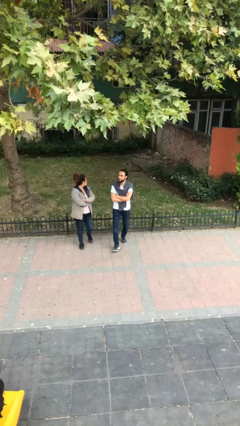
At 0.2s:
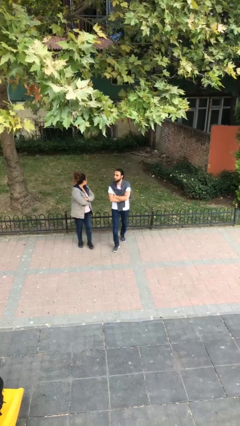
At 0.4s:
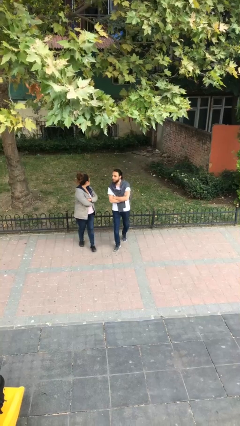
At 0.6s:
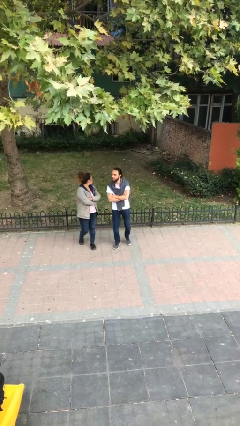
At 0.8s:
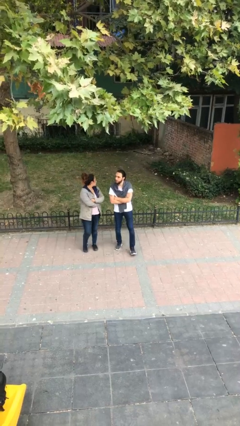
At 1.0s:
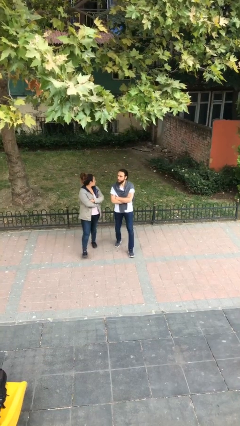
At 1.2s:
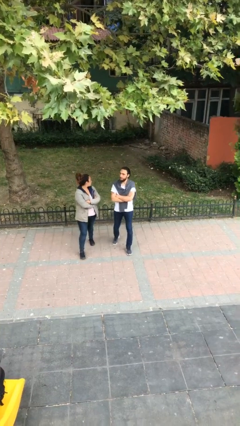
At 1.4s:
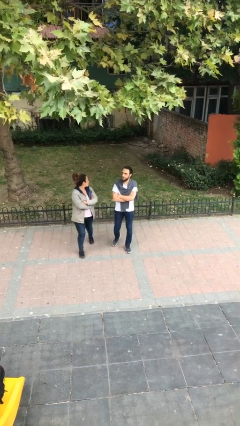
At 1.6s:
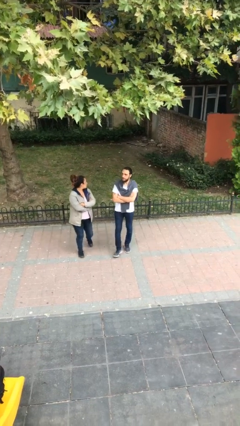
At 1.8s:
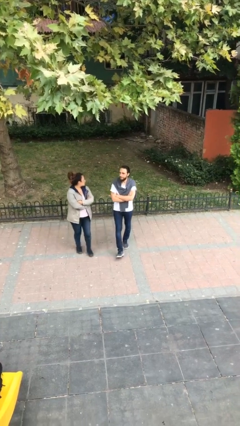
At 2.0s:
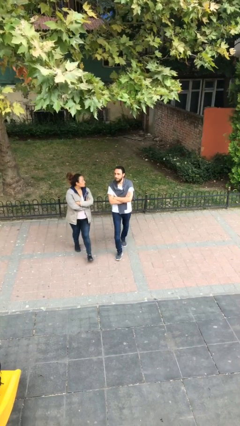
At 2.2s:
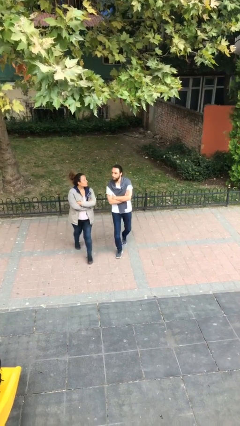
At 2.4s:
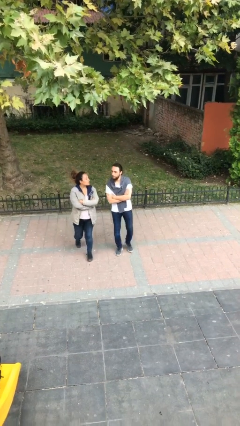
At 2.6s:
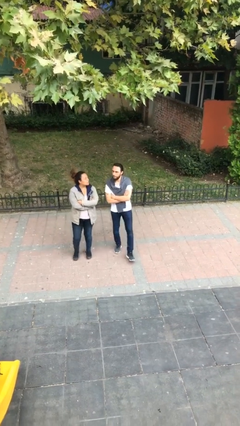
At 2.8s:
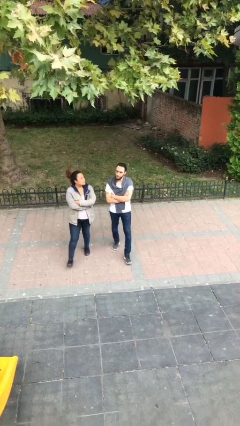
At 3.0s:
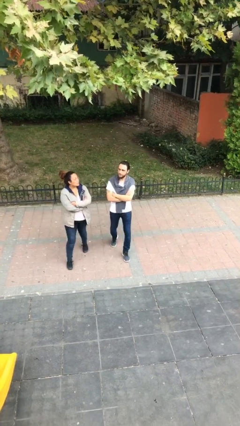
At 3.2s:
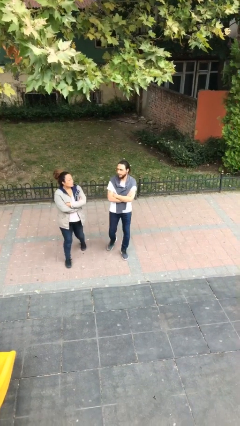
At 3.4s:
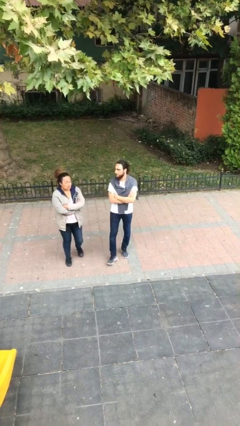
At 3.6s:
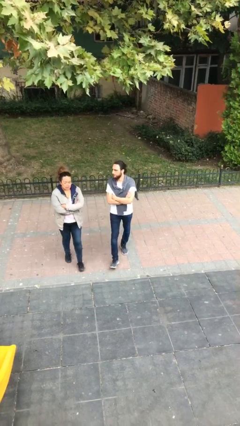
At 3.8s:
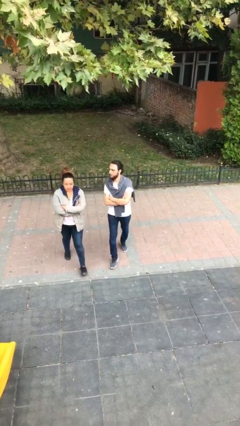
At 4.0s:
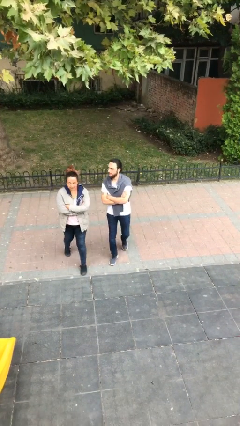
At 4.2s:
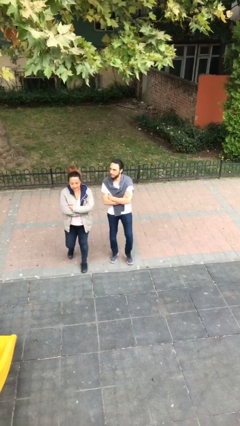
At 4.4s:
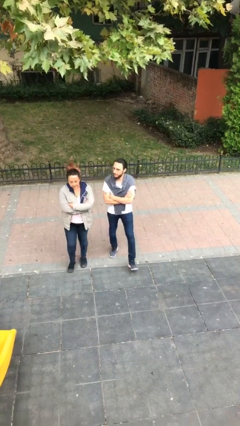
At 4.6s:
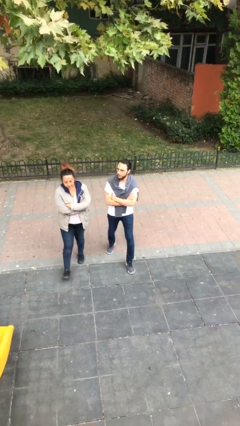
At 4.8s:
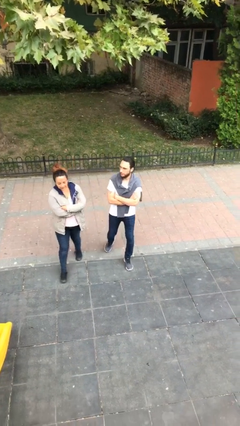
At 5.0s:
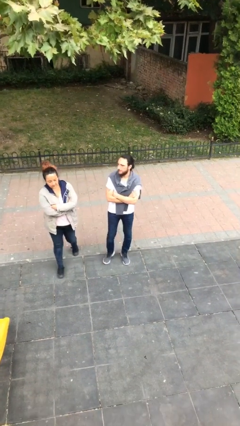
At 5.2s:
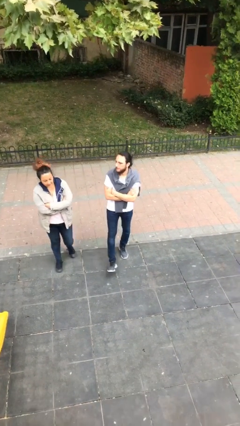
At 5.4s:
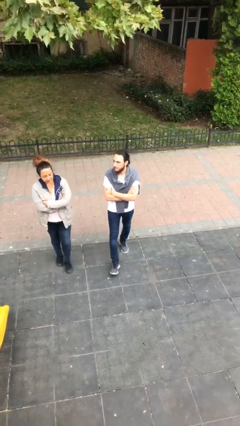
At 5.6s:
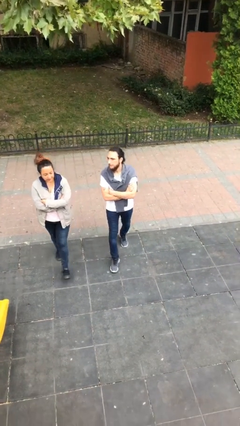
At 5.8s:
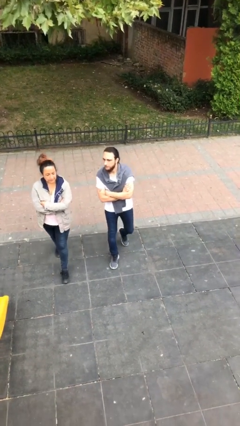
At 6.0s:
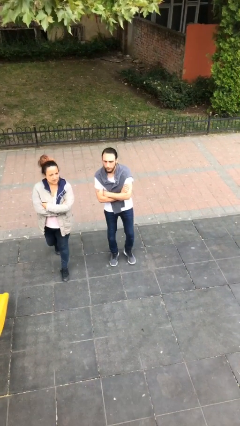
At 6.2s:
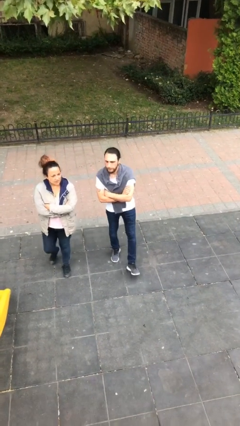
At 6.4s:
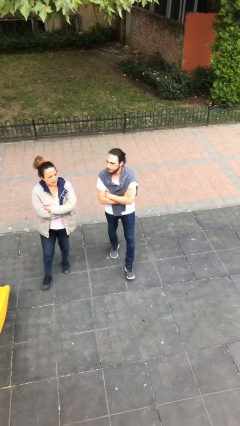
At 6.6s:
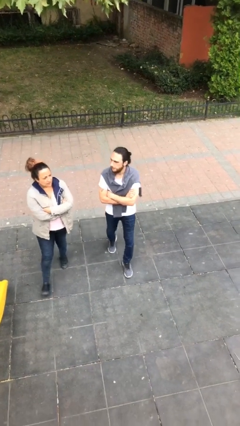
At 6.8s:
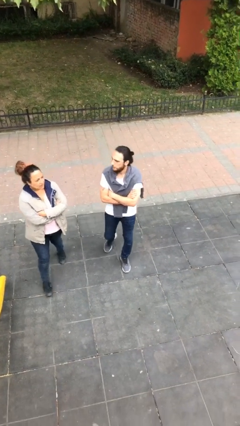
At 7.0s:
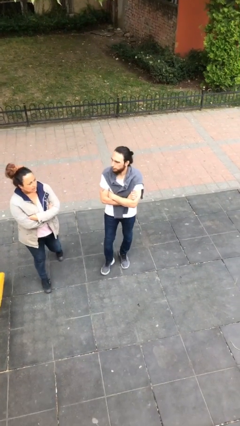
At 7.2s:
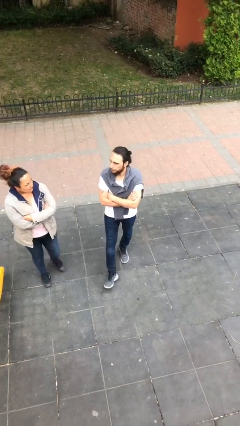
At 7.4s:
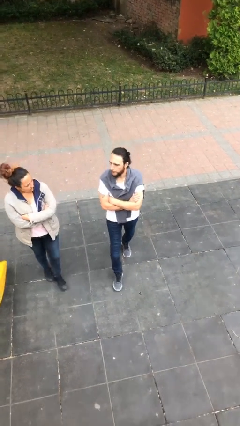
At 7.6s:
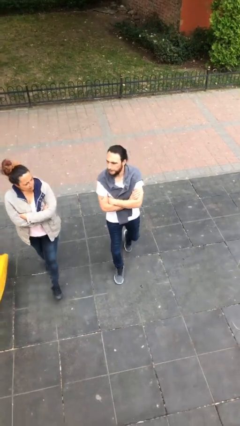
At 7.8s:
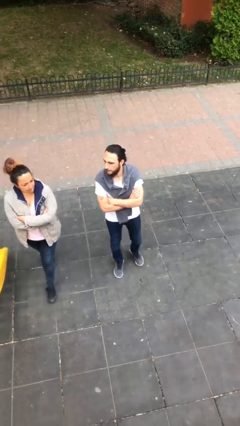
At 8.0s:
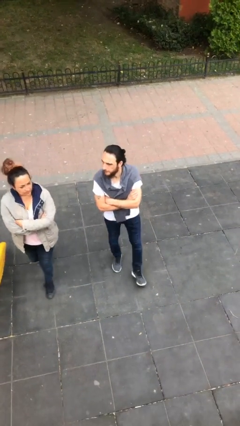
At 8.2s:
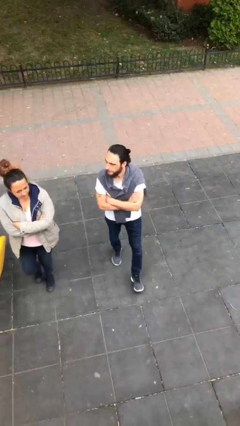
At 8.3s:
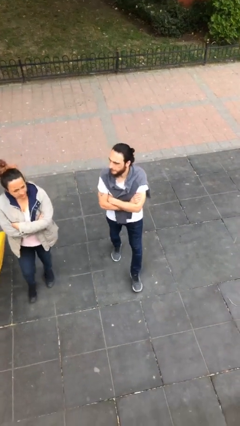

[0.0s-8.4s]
person talks to person

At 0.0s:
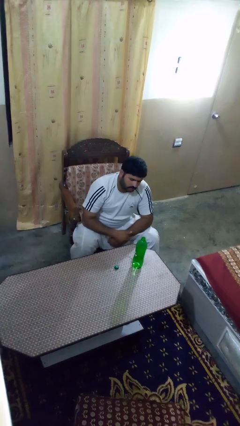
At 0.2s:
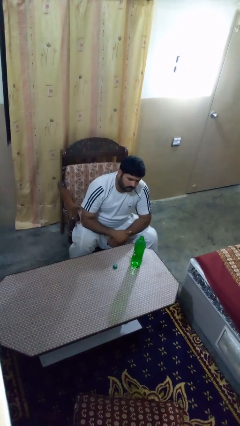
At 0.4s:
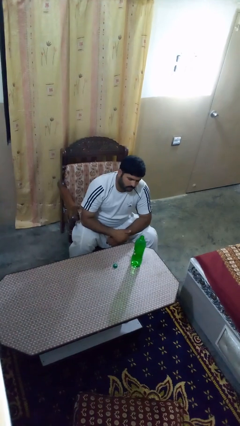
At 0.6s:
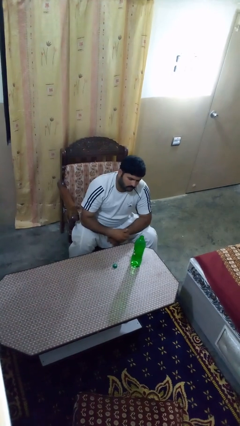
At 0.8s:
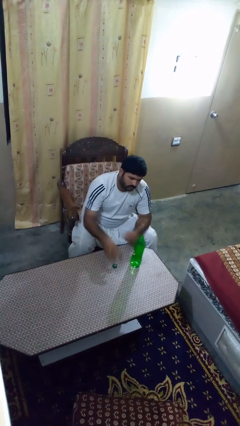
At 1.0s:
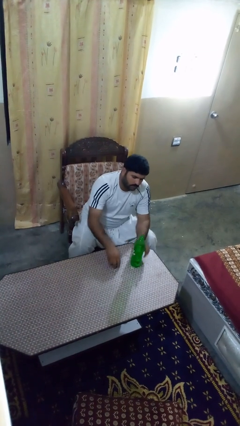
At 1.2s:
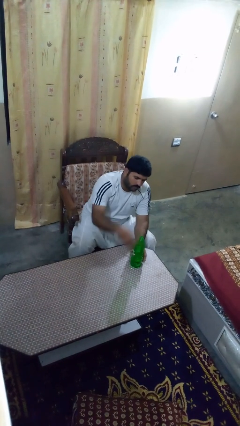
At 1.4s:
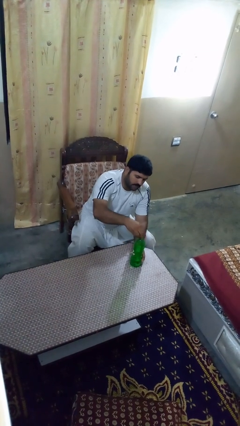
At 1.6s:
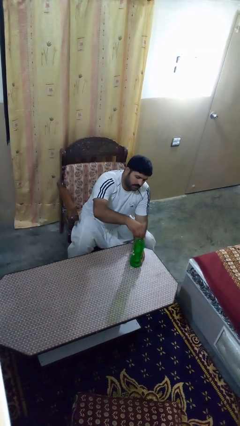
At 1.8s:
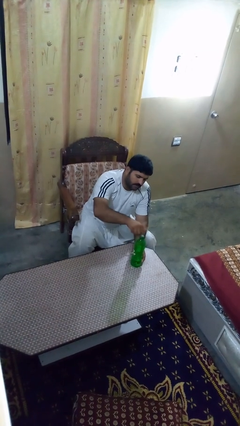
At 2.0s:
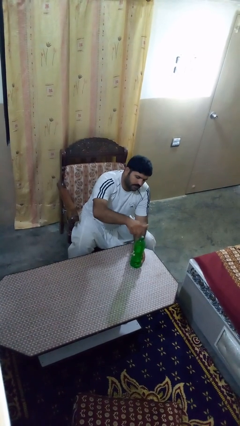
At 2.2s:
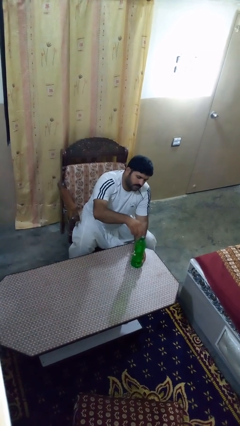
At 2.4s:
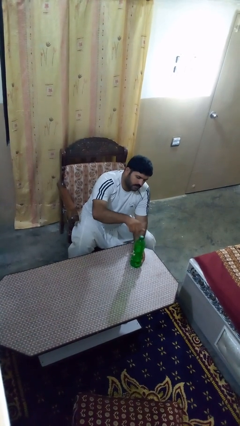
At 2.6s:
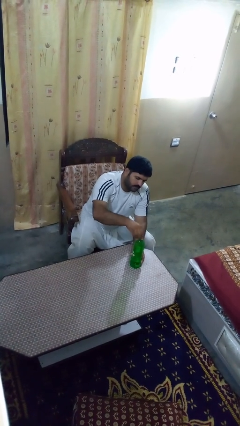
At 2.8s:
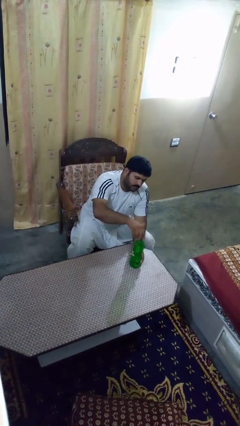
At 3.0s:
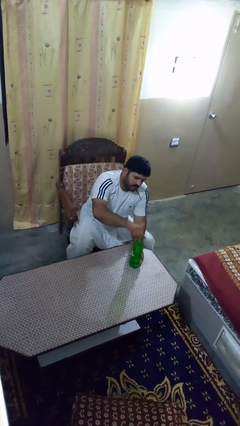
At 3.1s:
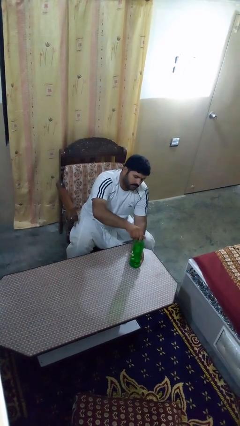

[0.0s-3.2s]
person screws lid to bottle

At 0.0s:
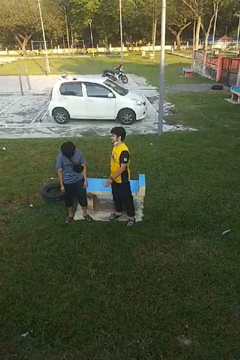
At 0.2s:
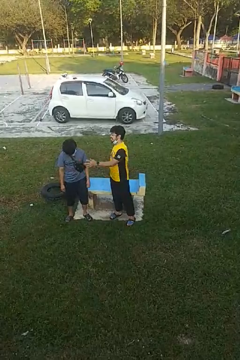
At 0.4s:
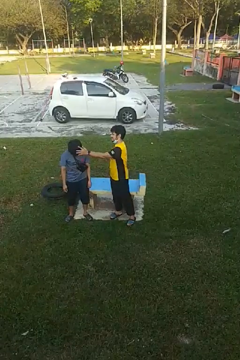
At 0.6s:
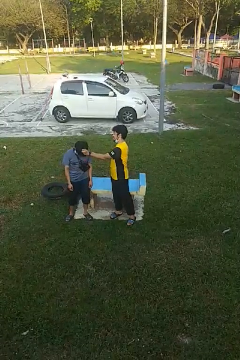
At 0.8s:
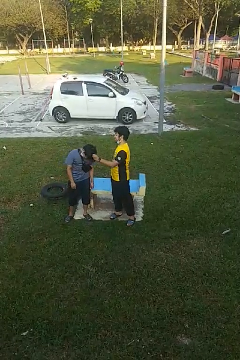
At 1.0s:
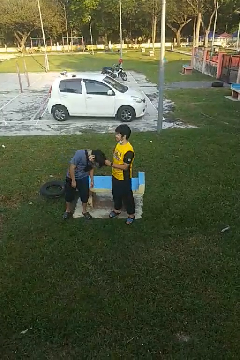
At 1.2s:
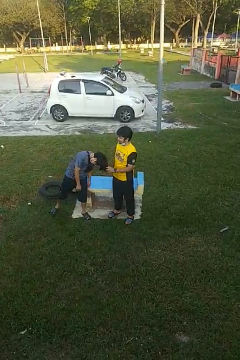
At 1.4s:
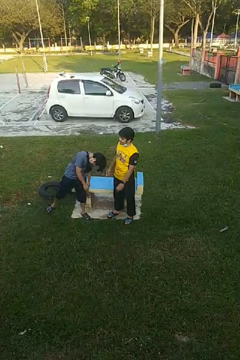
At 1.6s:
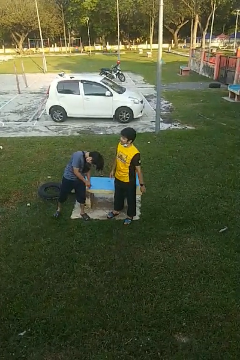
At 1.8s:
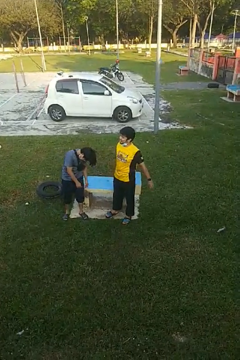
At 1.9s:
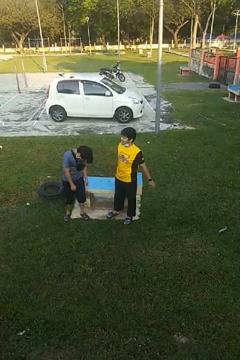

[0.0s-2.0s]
person grabs person by hair

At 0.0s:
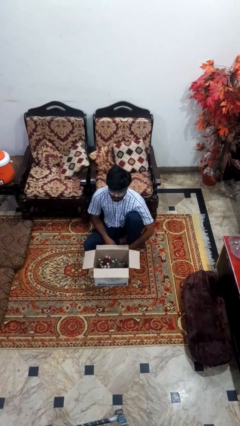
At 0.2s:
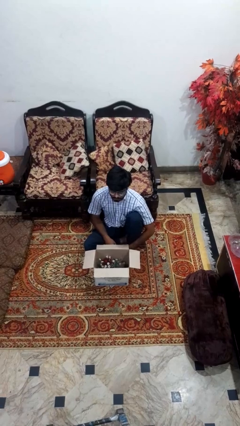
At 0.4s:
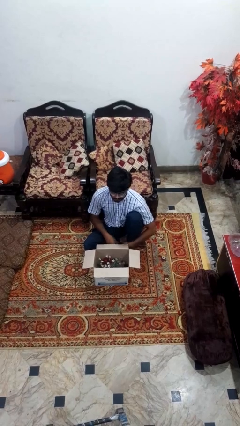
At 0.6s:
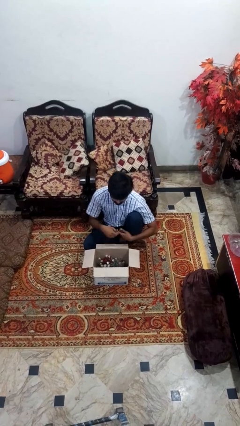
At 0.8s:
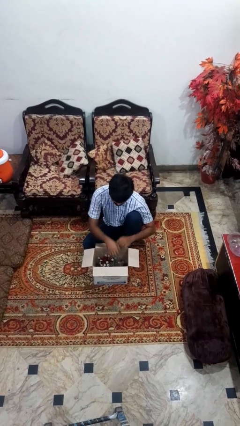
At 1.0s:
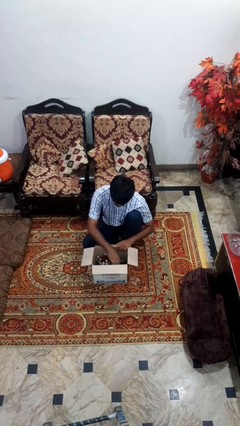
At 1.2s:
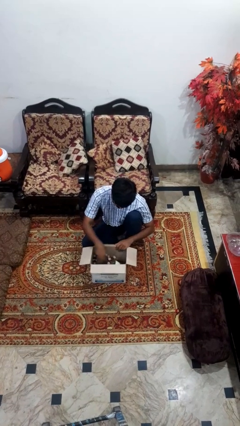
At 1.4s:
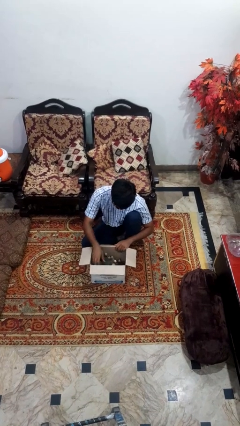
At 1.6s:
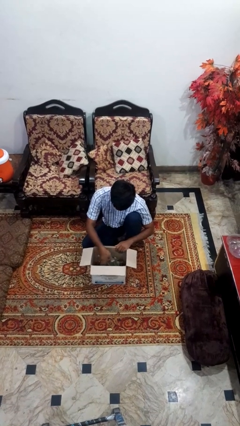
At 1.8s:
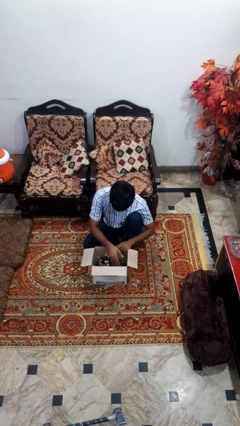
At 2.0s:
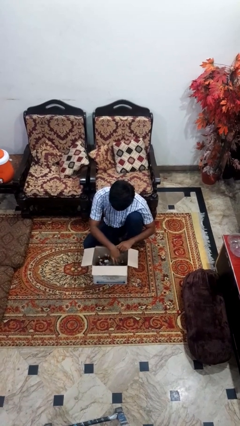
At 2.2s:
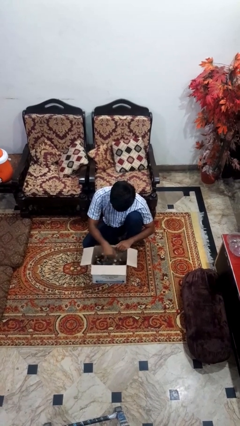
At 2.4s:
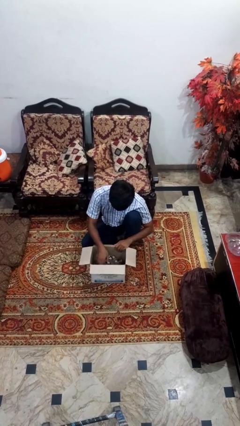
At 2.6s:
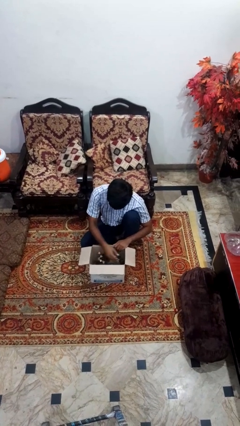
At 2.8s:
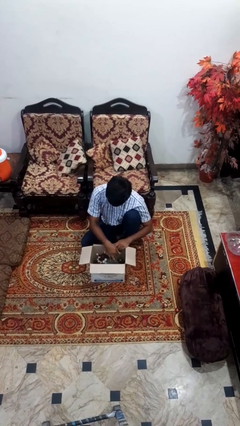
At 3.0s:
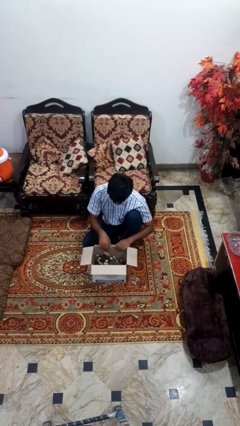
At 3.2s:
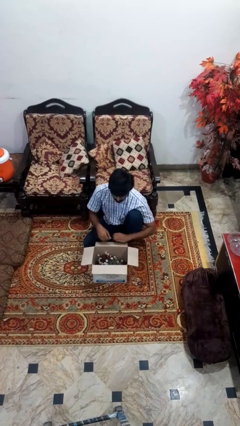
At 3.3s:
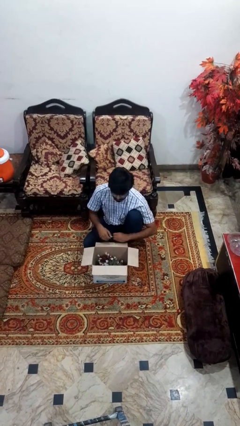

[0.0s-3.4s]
person searches in box

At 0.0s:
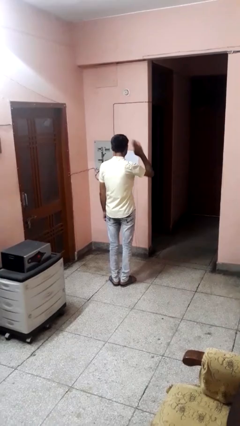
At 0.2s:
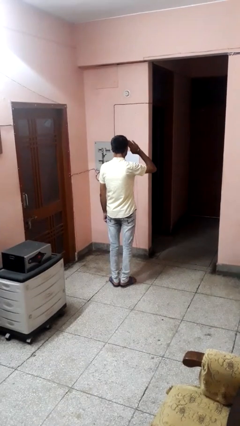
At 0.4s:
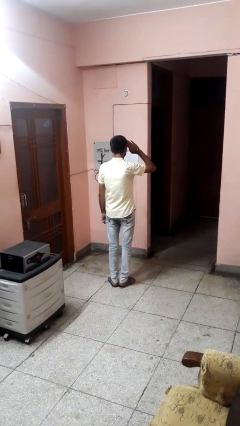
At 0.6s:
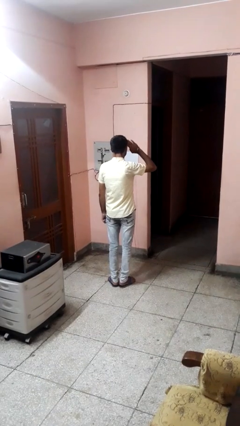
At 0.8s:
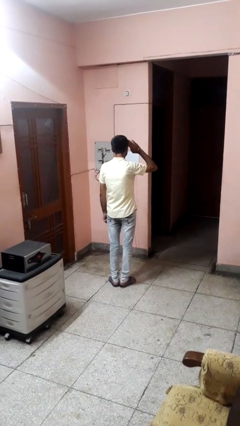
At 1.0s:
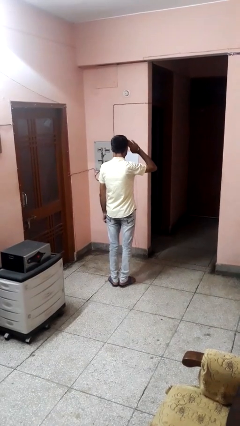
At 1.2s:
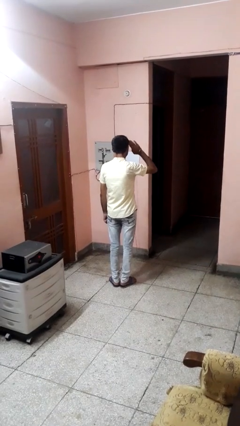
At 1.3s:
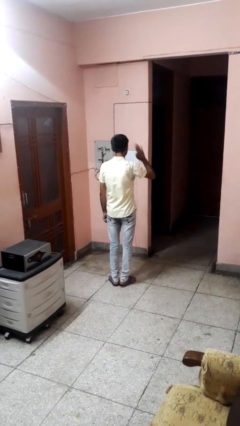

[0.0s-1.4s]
person salutes
